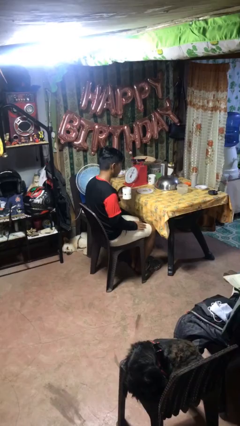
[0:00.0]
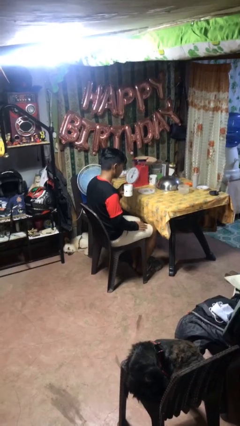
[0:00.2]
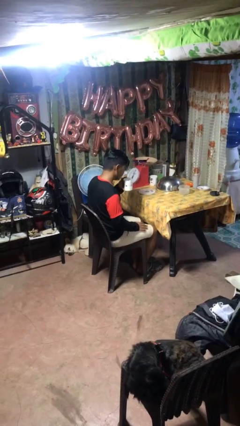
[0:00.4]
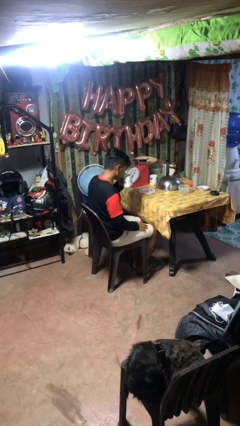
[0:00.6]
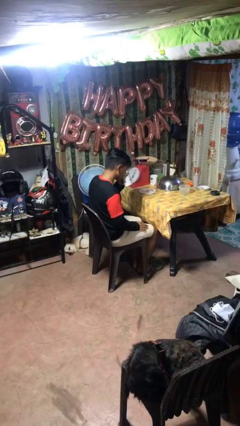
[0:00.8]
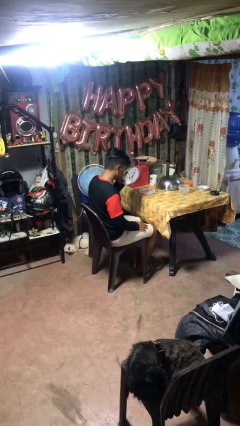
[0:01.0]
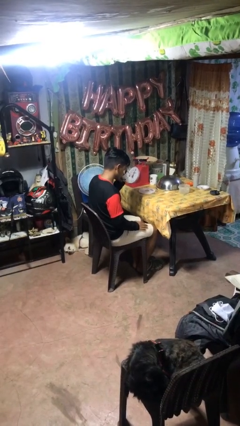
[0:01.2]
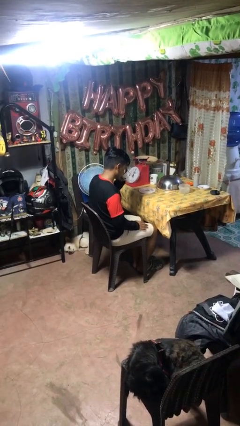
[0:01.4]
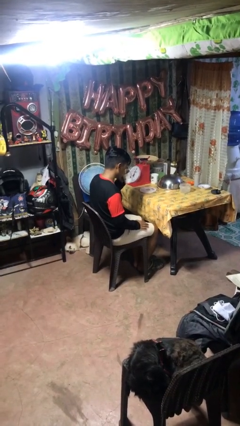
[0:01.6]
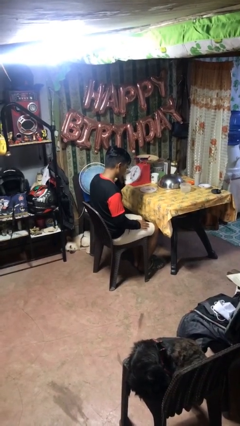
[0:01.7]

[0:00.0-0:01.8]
person drinks from mug

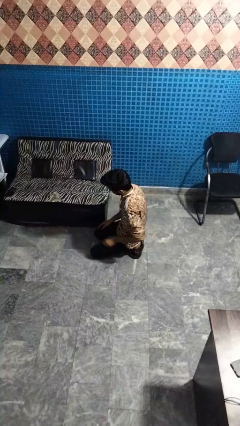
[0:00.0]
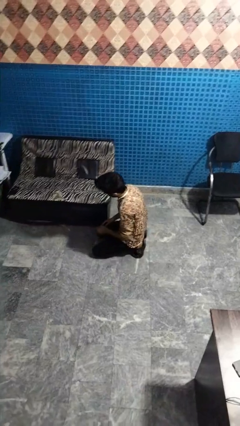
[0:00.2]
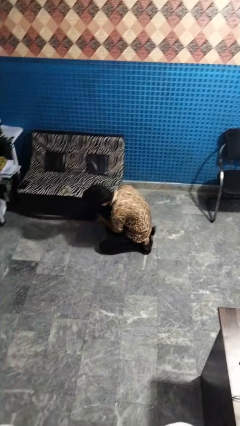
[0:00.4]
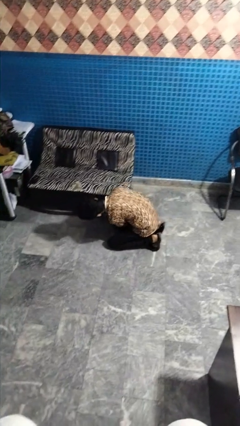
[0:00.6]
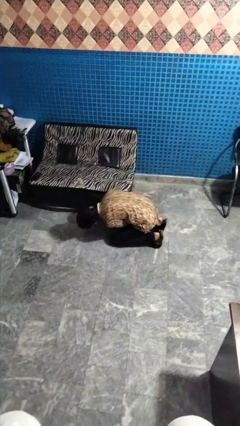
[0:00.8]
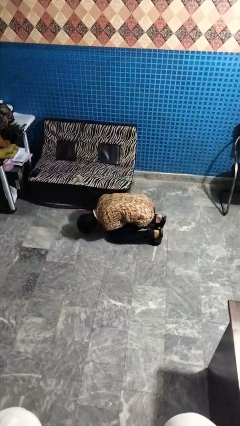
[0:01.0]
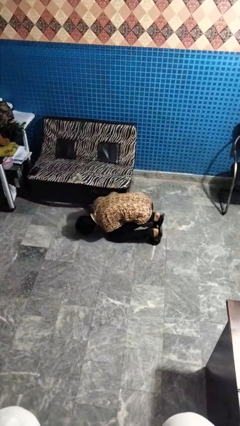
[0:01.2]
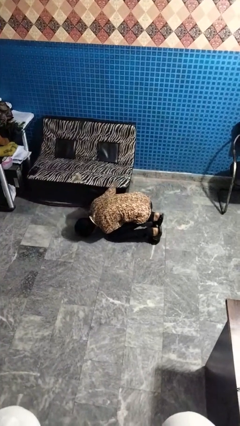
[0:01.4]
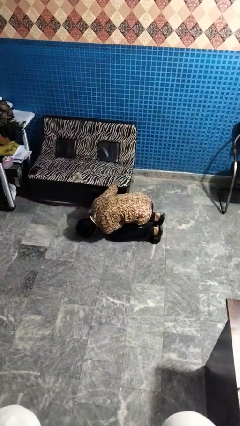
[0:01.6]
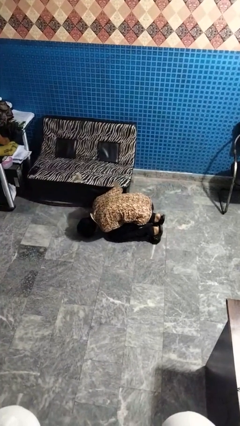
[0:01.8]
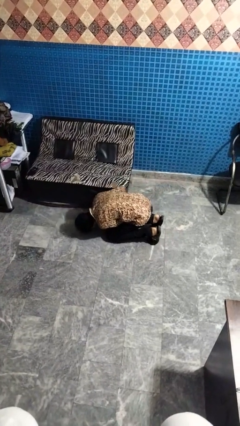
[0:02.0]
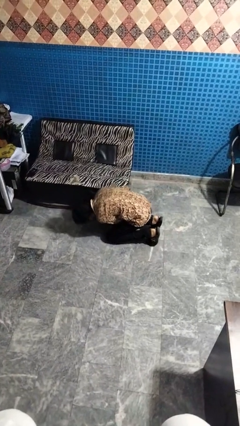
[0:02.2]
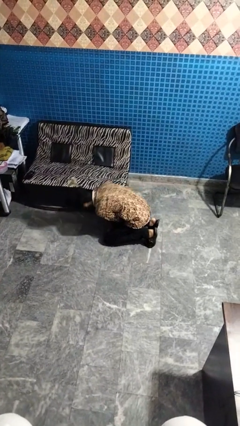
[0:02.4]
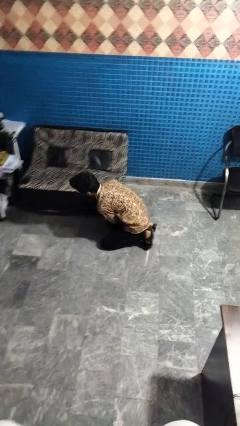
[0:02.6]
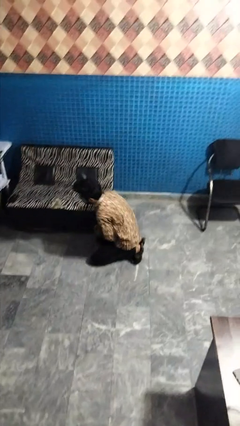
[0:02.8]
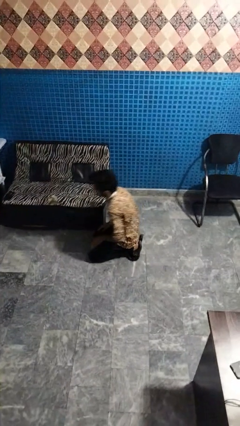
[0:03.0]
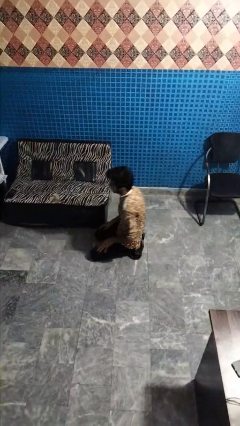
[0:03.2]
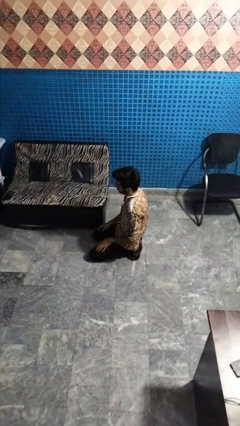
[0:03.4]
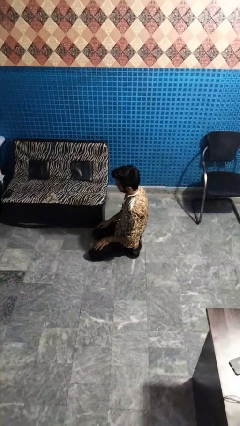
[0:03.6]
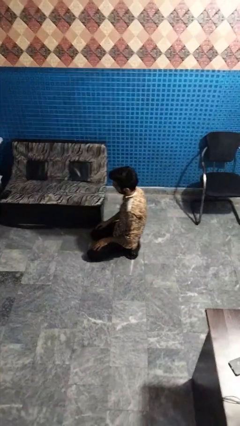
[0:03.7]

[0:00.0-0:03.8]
person searches under couch

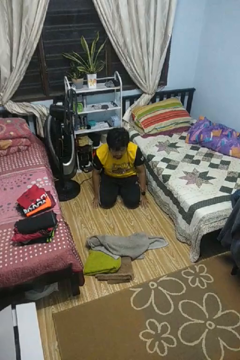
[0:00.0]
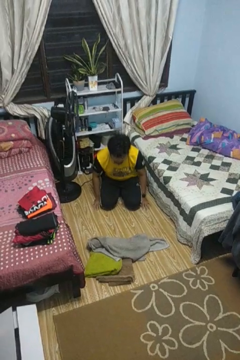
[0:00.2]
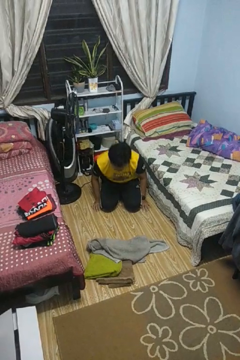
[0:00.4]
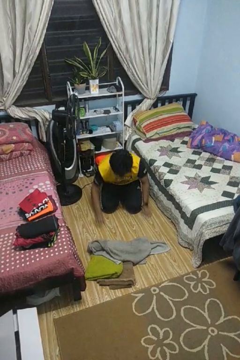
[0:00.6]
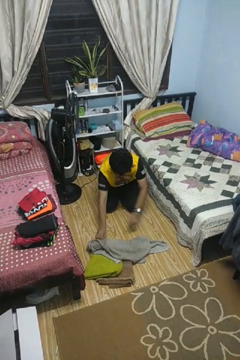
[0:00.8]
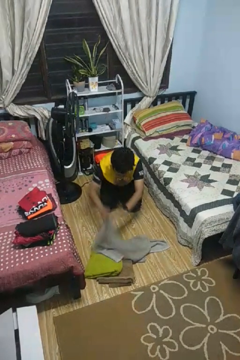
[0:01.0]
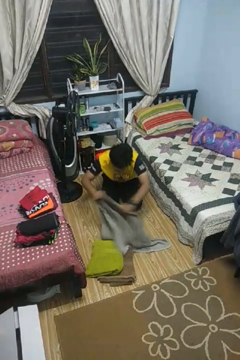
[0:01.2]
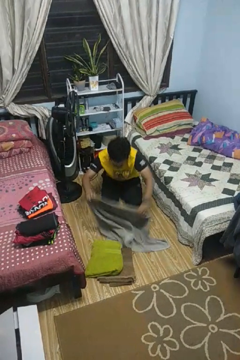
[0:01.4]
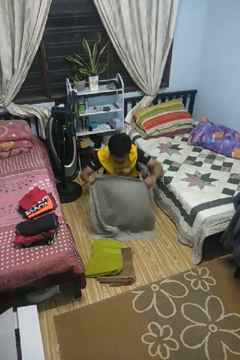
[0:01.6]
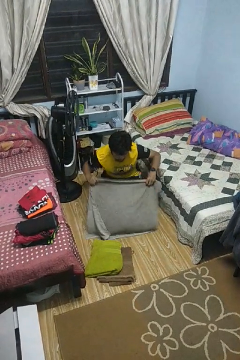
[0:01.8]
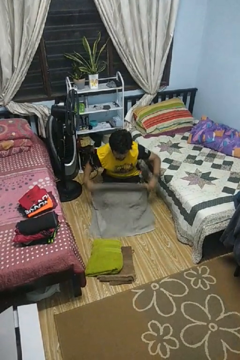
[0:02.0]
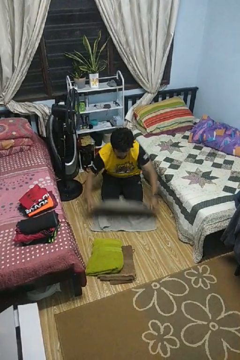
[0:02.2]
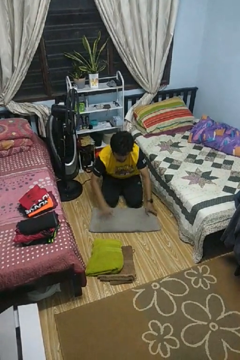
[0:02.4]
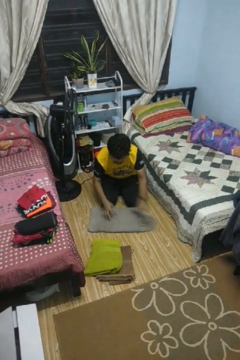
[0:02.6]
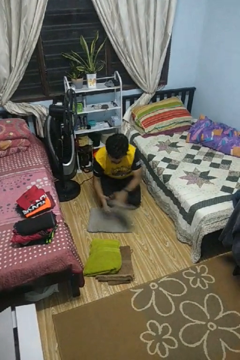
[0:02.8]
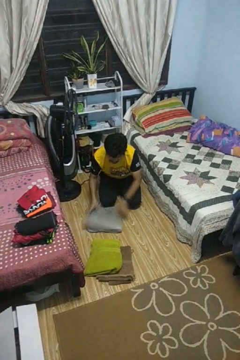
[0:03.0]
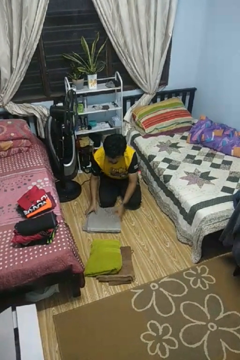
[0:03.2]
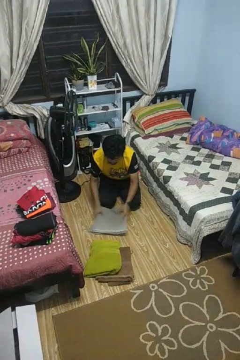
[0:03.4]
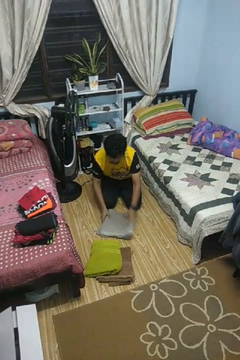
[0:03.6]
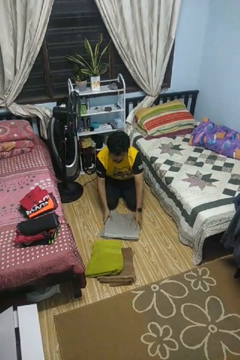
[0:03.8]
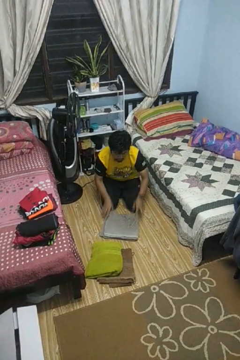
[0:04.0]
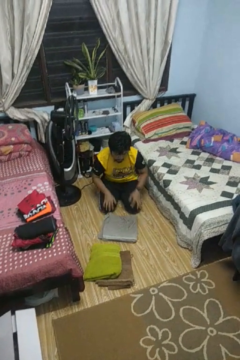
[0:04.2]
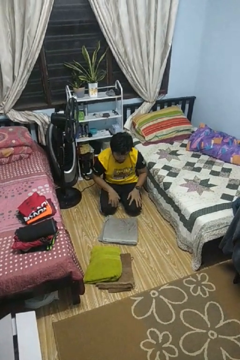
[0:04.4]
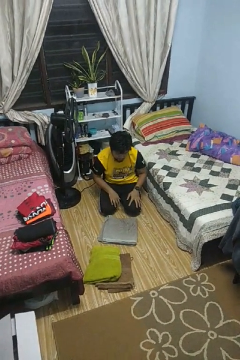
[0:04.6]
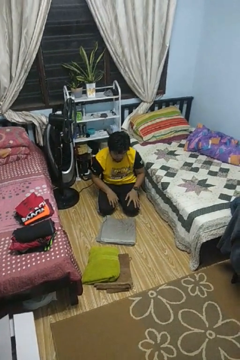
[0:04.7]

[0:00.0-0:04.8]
person folds towel

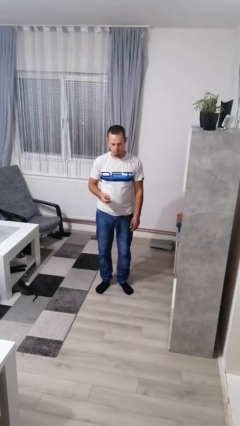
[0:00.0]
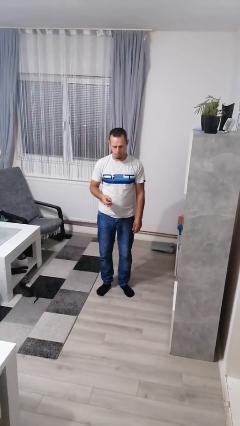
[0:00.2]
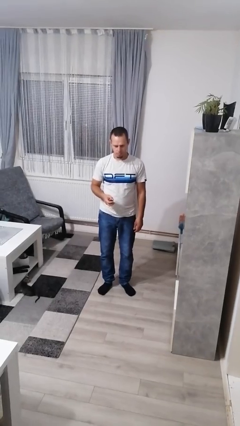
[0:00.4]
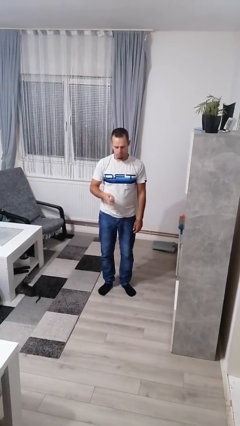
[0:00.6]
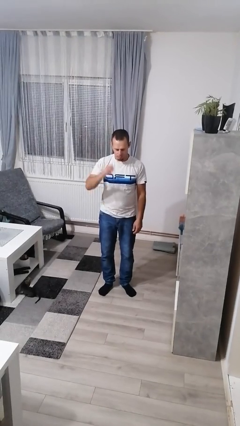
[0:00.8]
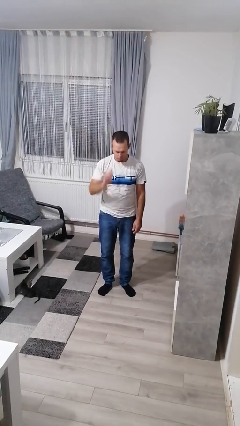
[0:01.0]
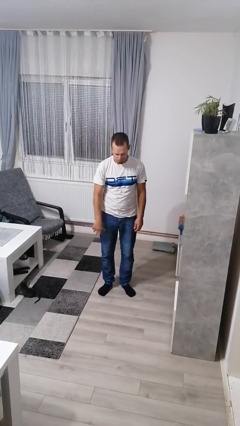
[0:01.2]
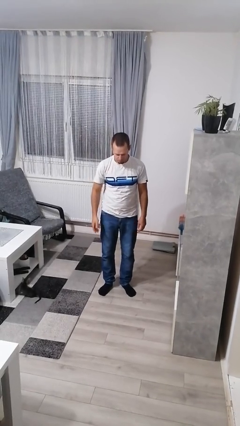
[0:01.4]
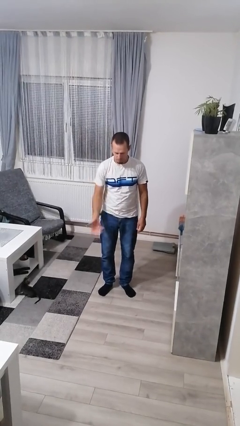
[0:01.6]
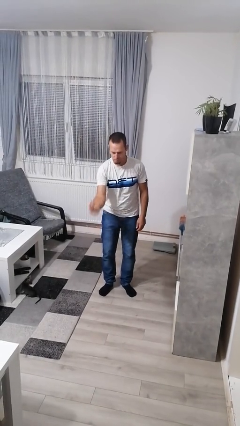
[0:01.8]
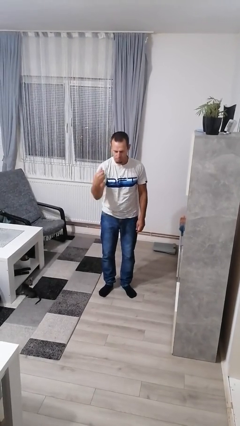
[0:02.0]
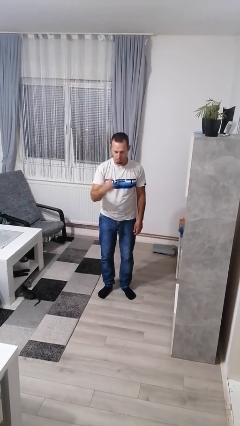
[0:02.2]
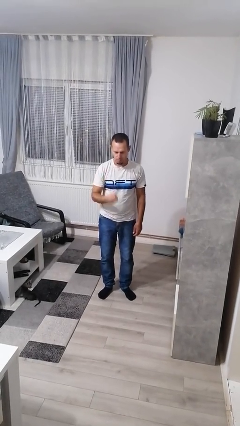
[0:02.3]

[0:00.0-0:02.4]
person bounces ball on floor

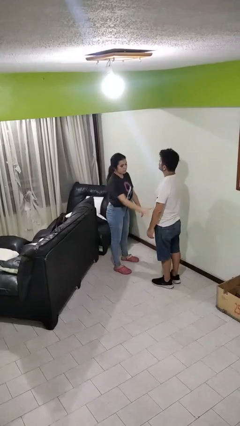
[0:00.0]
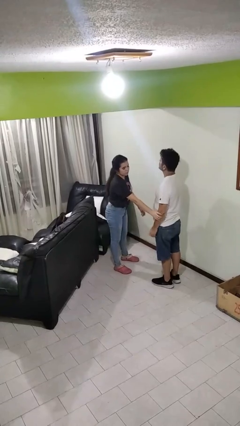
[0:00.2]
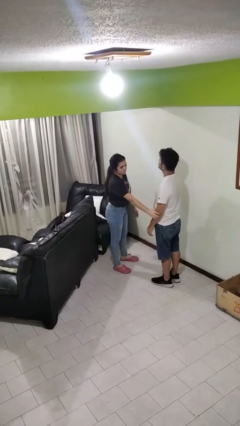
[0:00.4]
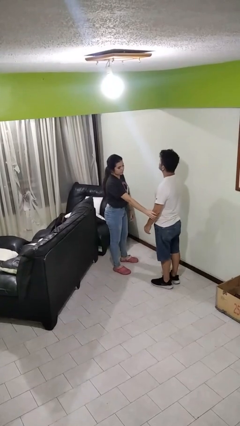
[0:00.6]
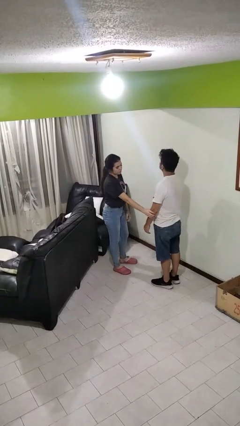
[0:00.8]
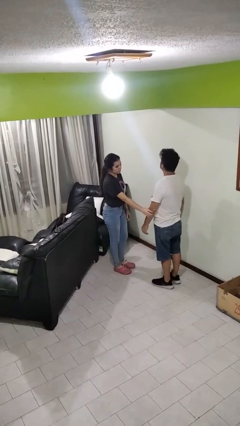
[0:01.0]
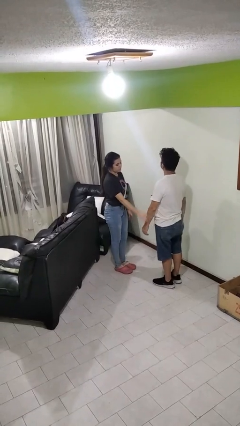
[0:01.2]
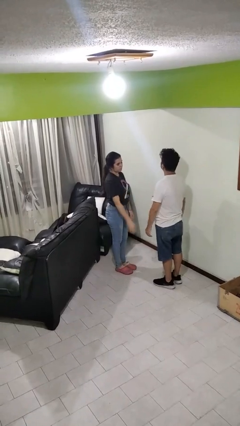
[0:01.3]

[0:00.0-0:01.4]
person grabs person by forearm

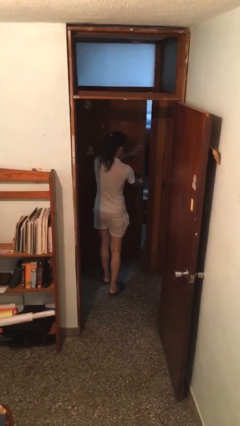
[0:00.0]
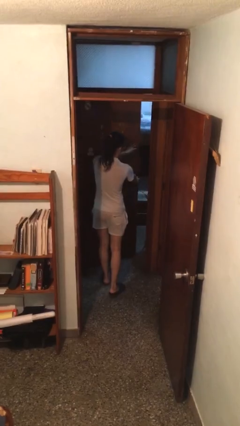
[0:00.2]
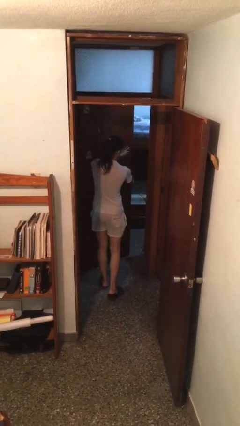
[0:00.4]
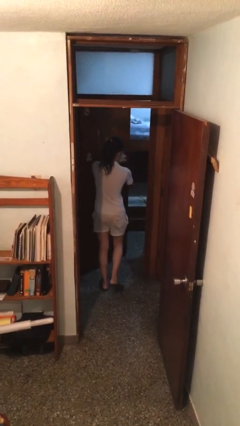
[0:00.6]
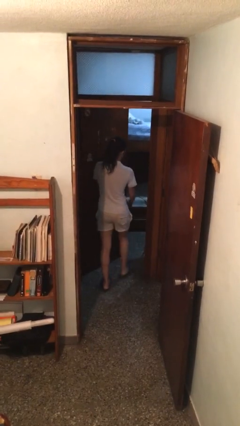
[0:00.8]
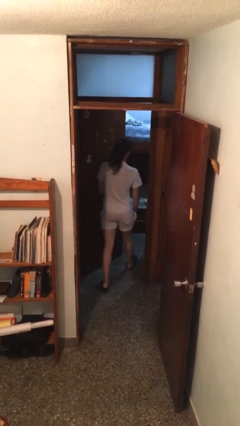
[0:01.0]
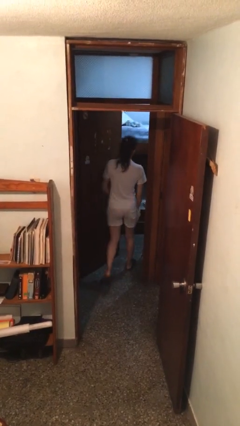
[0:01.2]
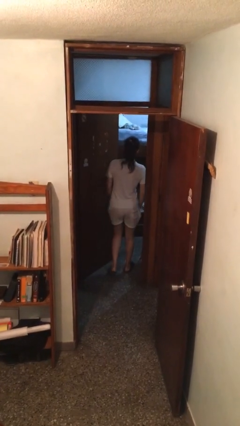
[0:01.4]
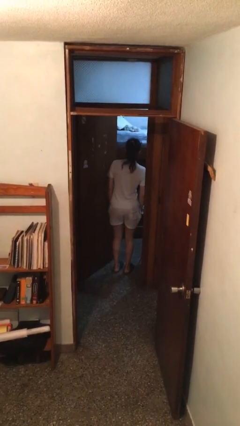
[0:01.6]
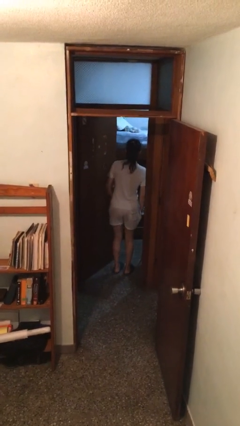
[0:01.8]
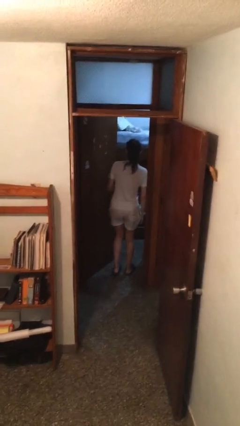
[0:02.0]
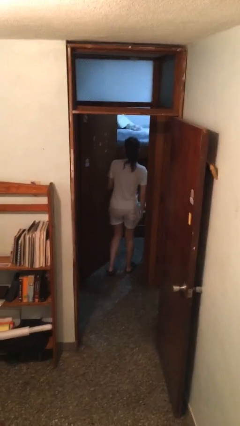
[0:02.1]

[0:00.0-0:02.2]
person opens facility door

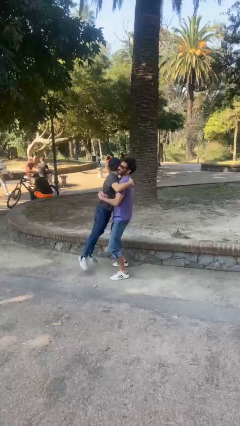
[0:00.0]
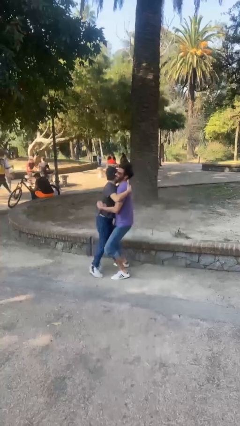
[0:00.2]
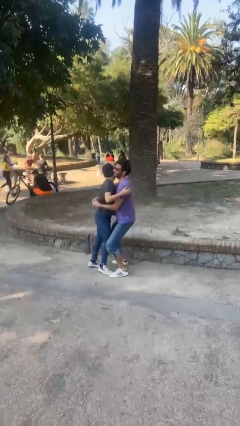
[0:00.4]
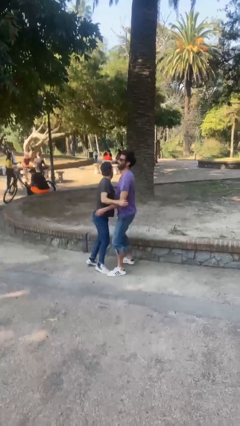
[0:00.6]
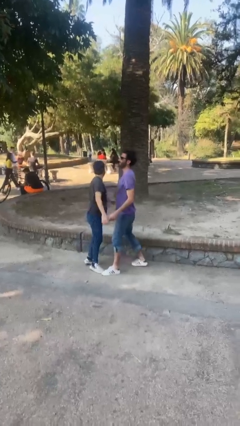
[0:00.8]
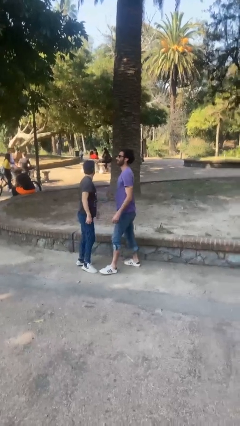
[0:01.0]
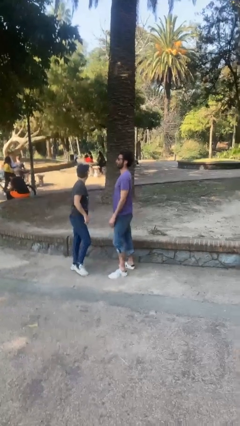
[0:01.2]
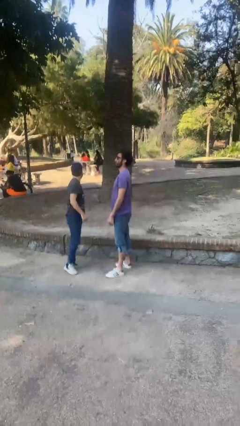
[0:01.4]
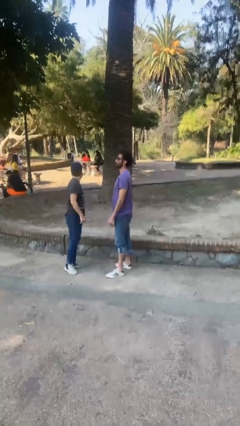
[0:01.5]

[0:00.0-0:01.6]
person puts down person
